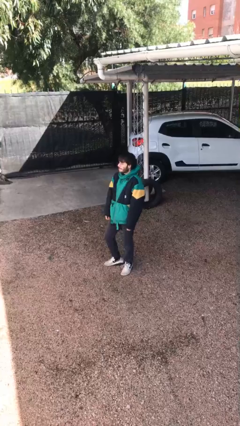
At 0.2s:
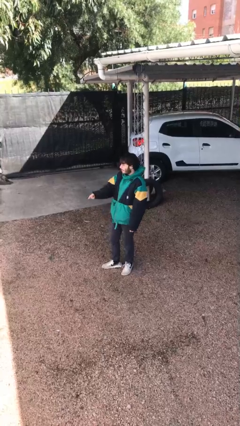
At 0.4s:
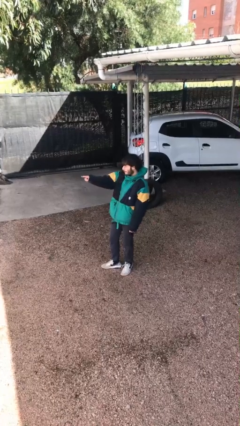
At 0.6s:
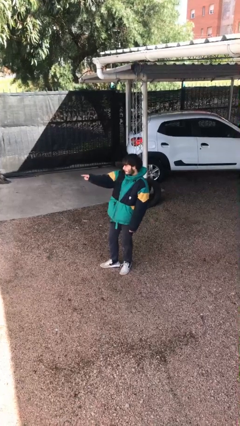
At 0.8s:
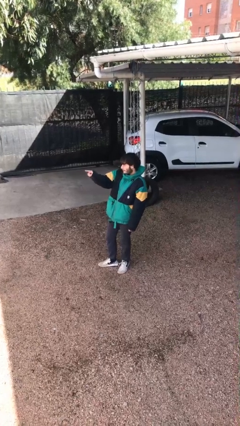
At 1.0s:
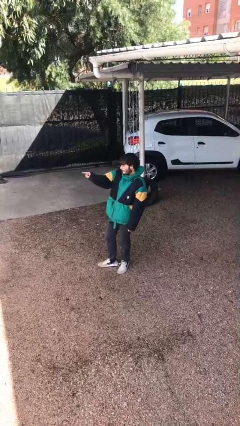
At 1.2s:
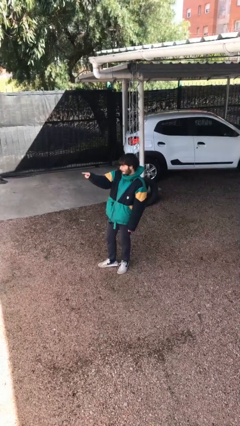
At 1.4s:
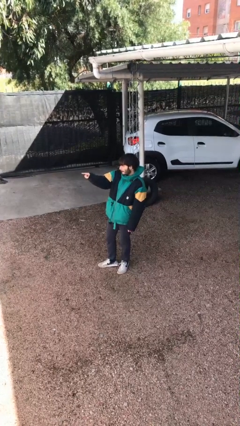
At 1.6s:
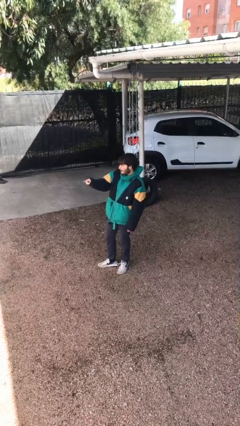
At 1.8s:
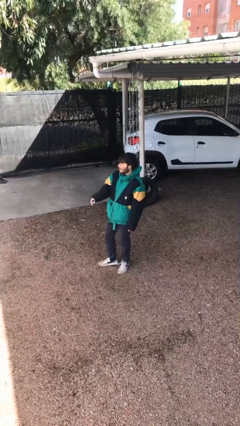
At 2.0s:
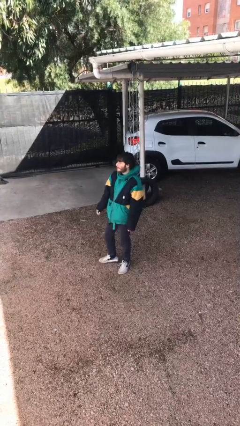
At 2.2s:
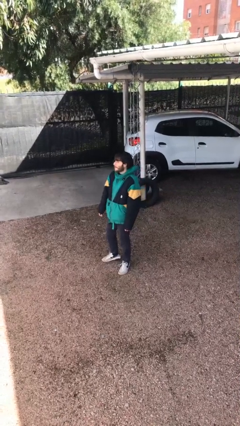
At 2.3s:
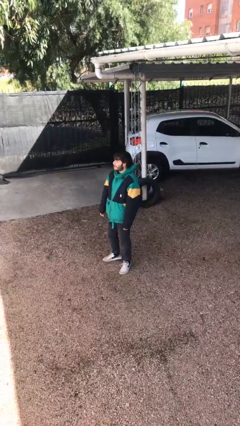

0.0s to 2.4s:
person points at person

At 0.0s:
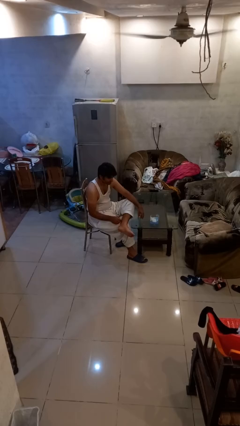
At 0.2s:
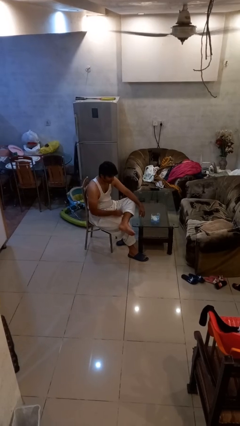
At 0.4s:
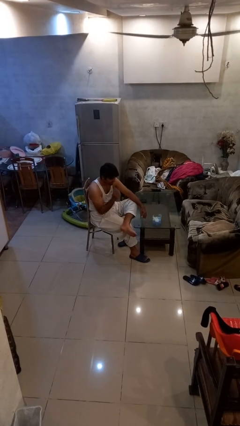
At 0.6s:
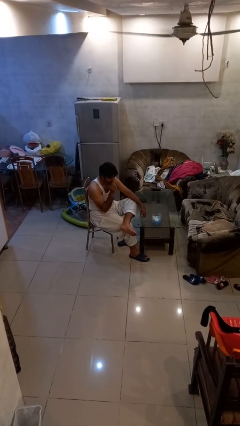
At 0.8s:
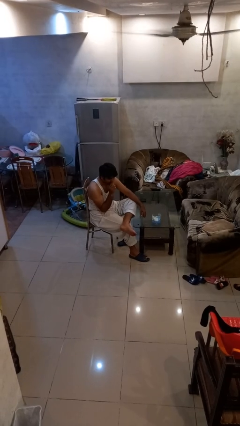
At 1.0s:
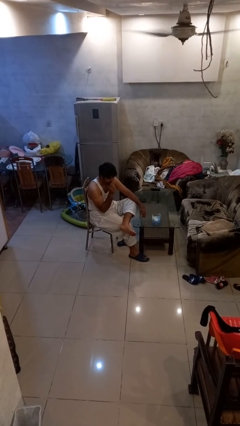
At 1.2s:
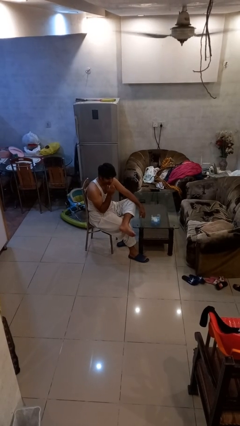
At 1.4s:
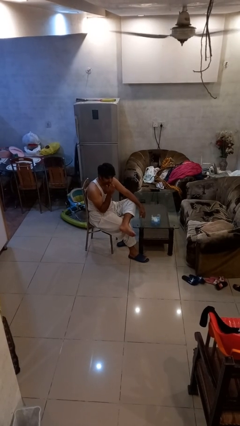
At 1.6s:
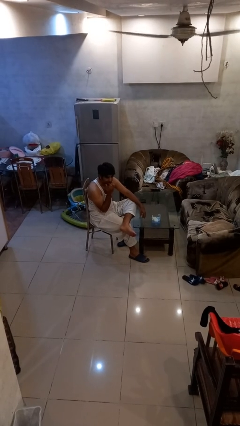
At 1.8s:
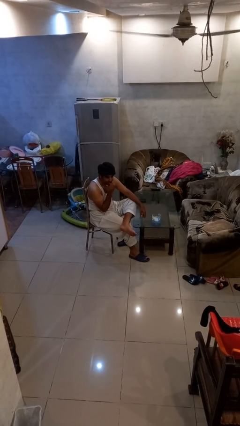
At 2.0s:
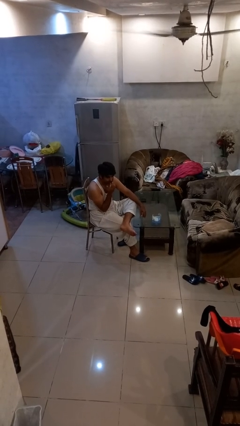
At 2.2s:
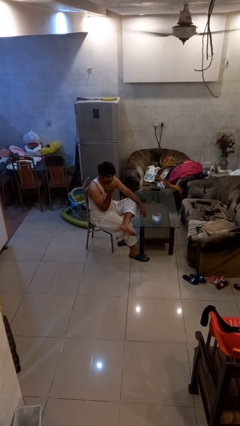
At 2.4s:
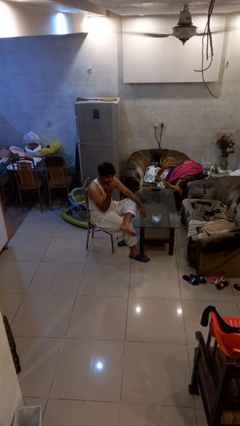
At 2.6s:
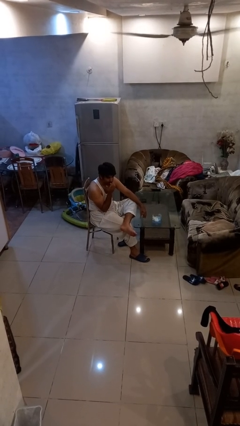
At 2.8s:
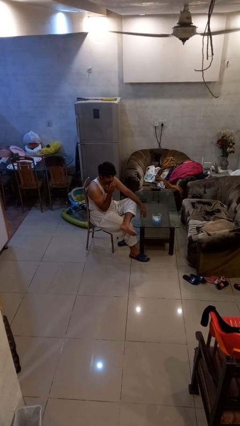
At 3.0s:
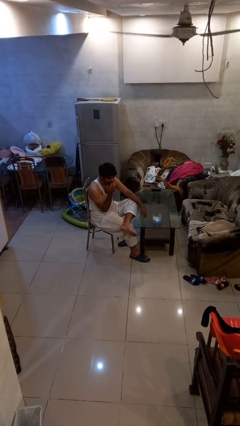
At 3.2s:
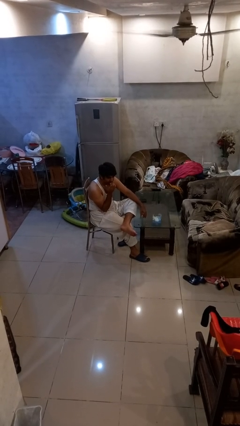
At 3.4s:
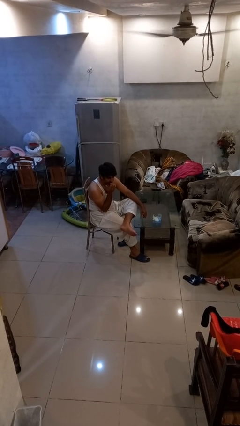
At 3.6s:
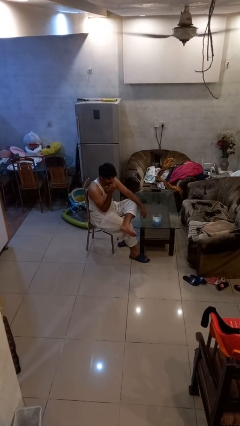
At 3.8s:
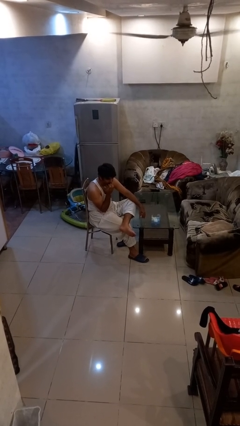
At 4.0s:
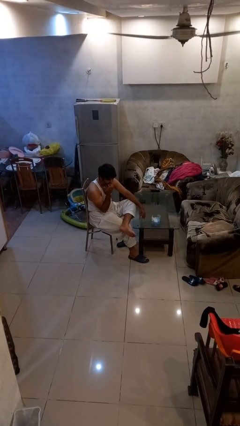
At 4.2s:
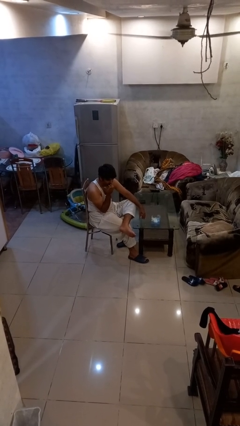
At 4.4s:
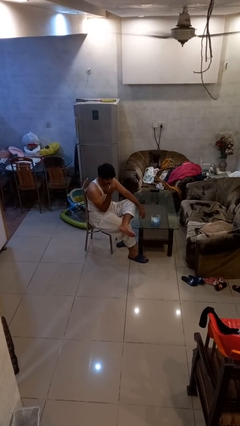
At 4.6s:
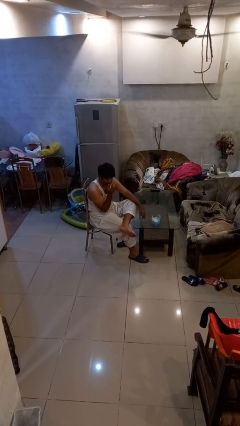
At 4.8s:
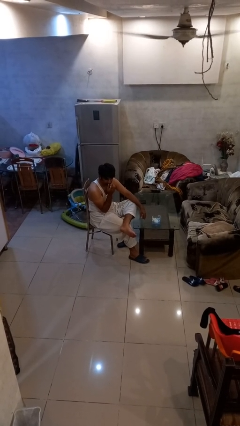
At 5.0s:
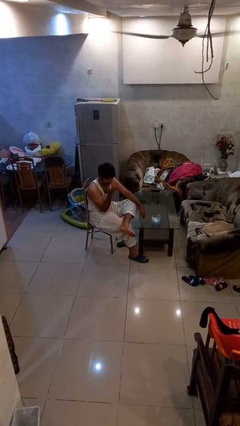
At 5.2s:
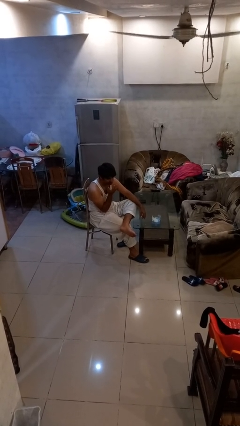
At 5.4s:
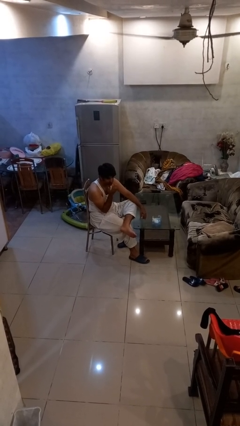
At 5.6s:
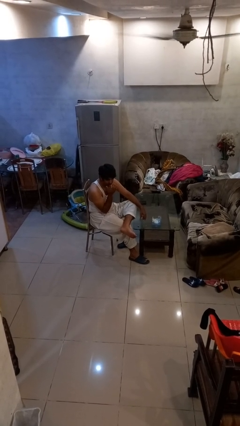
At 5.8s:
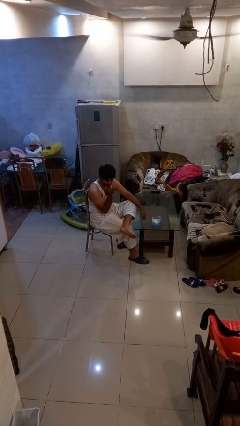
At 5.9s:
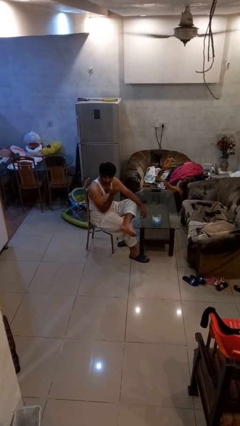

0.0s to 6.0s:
person licks fingers

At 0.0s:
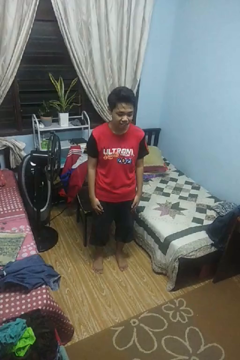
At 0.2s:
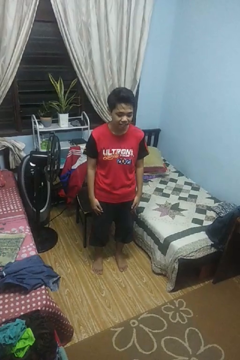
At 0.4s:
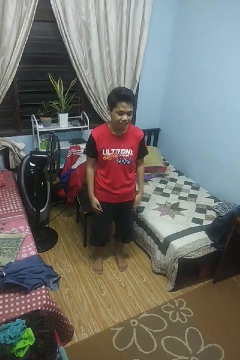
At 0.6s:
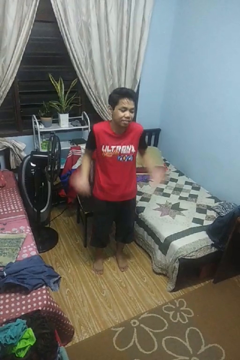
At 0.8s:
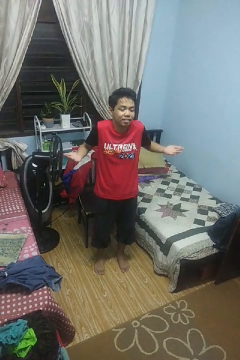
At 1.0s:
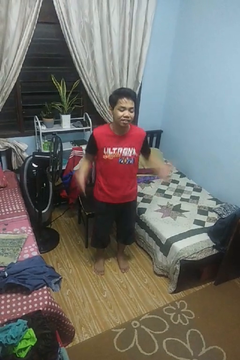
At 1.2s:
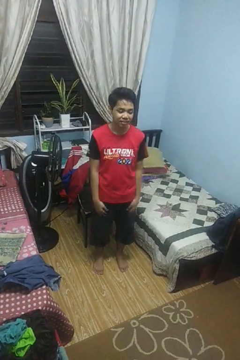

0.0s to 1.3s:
person shrugs

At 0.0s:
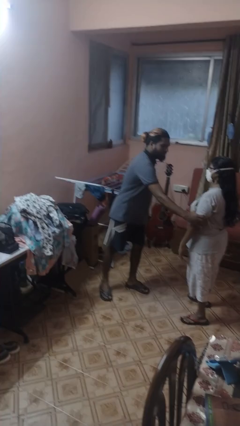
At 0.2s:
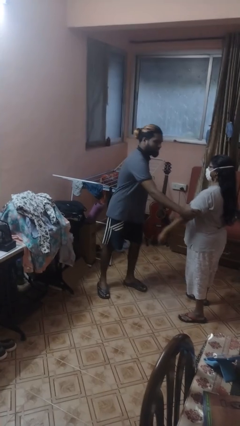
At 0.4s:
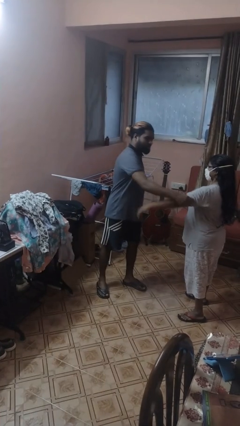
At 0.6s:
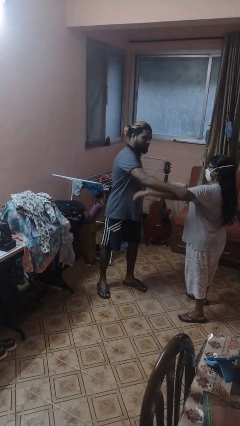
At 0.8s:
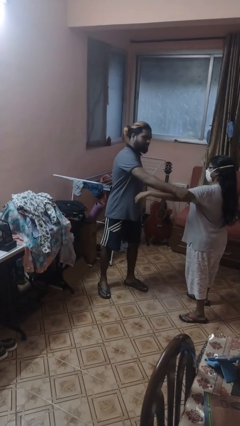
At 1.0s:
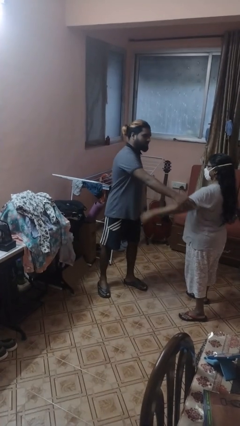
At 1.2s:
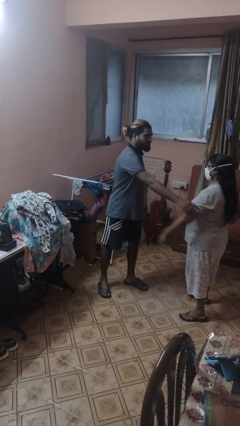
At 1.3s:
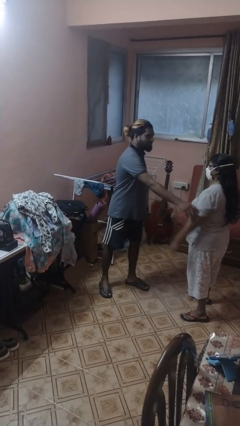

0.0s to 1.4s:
person grabs person by bicep

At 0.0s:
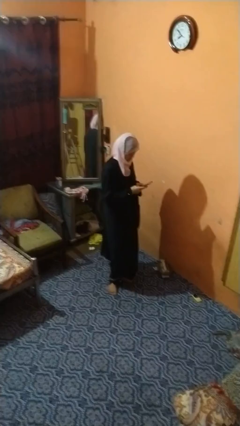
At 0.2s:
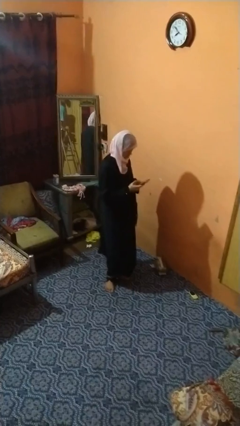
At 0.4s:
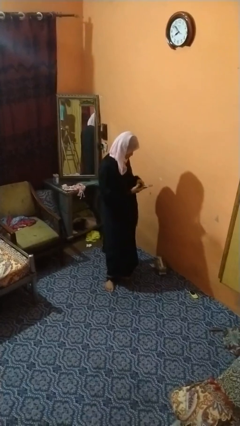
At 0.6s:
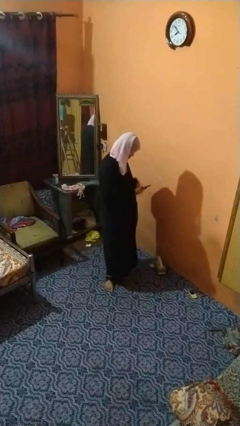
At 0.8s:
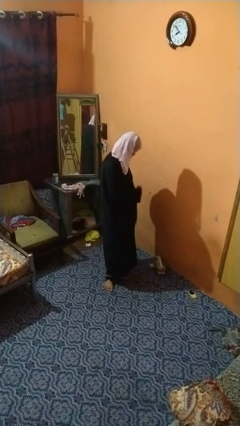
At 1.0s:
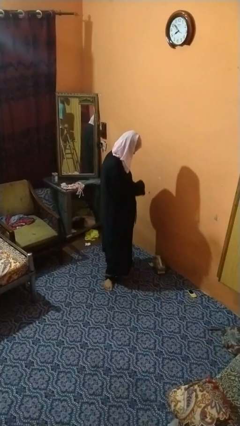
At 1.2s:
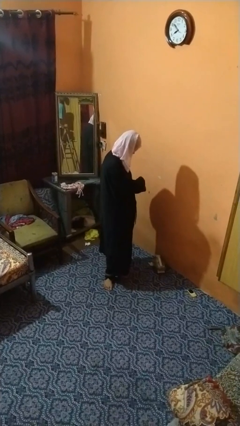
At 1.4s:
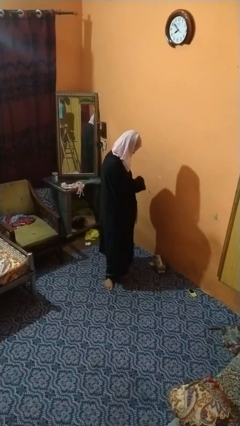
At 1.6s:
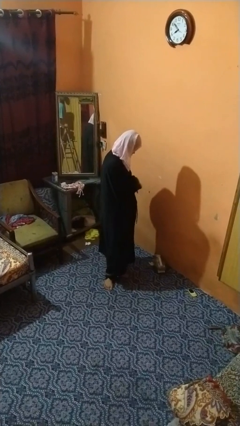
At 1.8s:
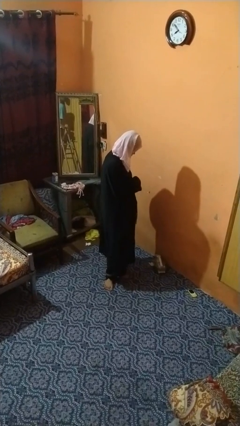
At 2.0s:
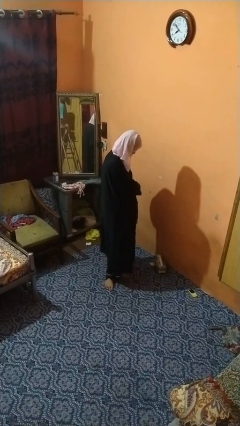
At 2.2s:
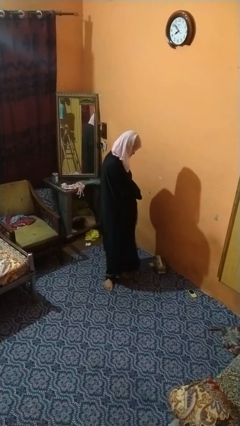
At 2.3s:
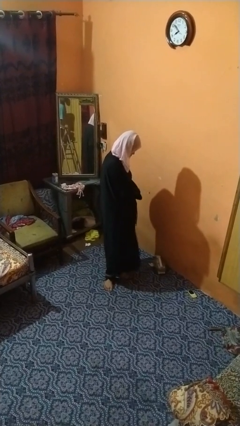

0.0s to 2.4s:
person puts phone into pocket

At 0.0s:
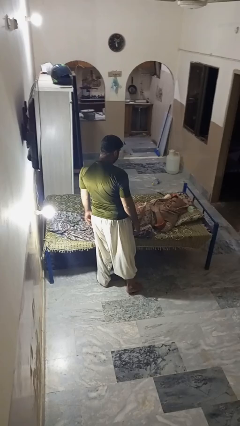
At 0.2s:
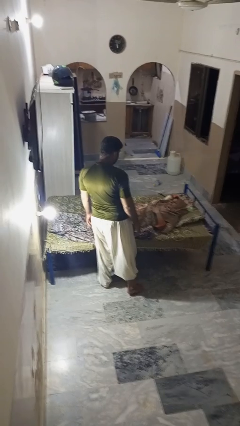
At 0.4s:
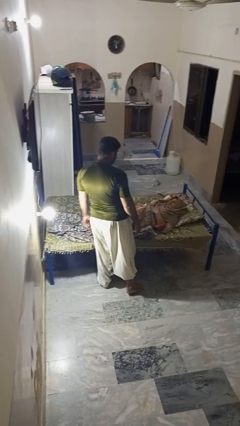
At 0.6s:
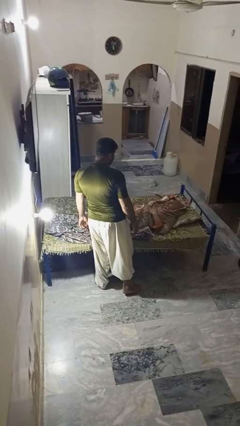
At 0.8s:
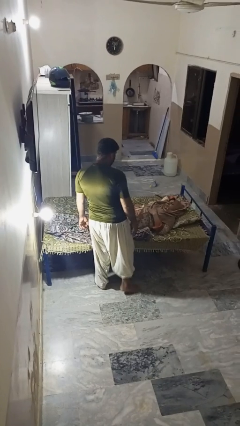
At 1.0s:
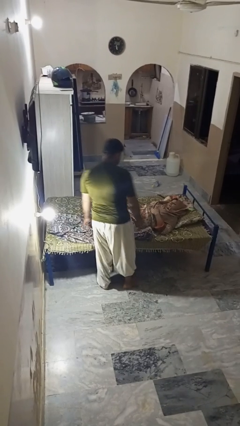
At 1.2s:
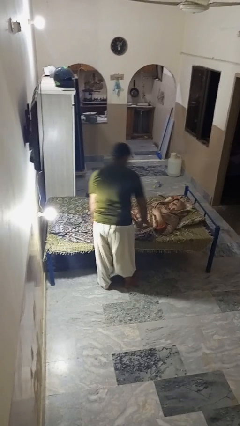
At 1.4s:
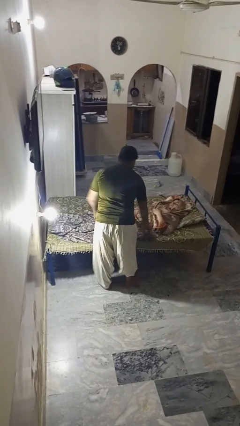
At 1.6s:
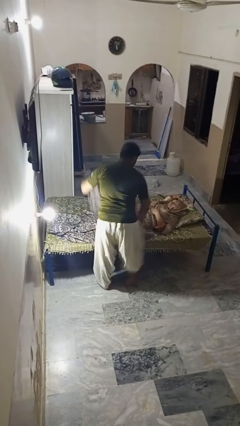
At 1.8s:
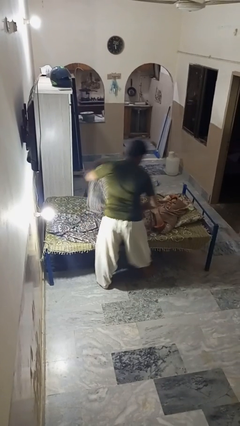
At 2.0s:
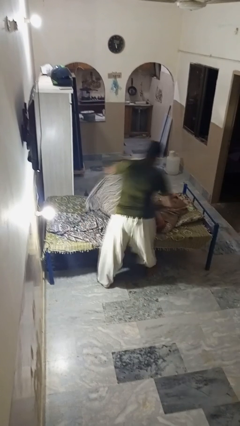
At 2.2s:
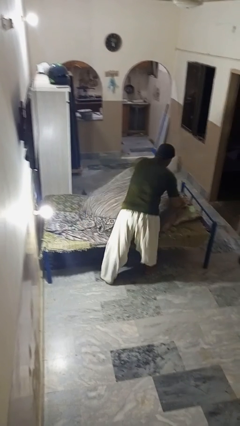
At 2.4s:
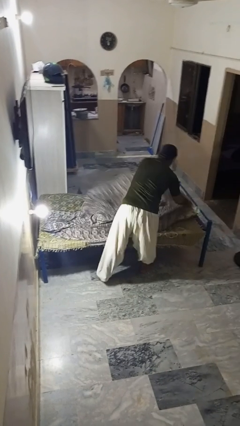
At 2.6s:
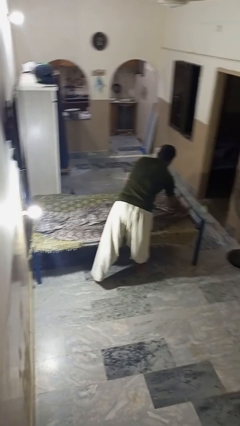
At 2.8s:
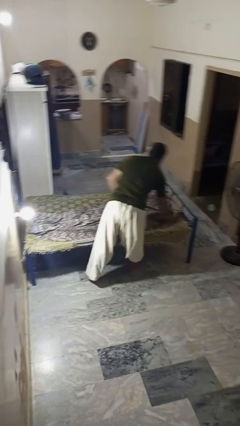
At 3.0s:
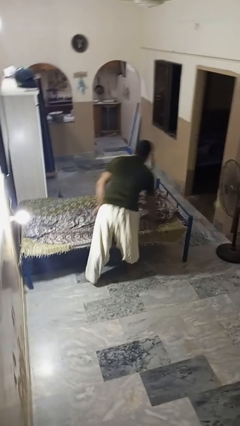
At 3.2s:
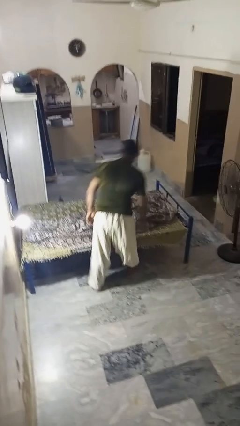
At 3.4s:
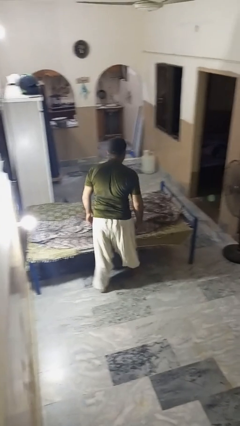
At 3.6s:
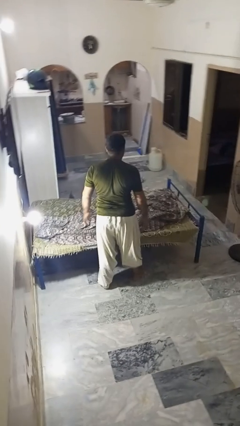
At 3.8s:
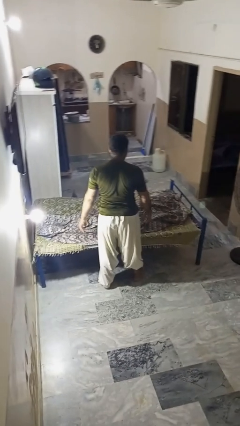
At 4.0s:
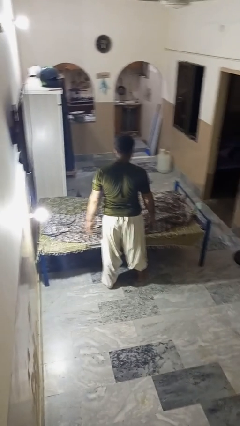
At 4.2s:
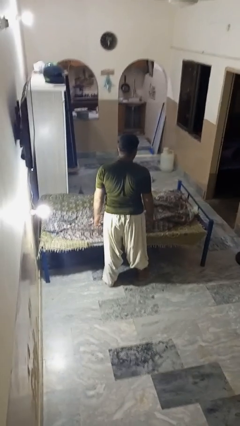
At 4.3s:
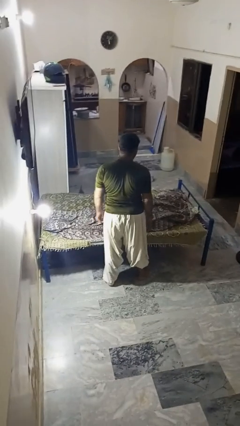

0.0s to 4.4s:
person covers friend with blanket
